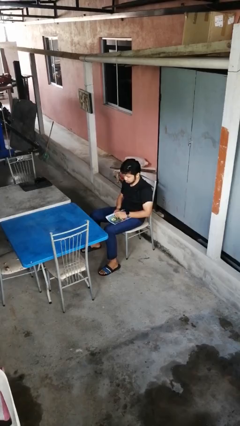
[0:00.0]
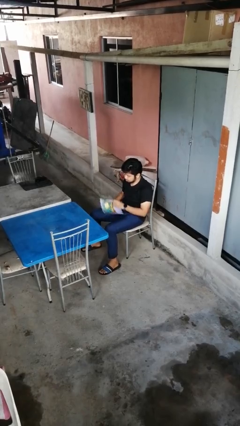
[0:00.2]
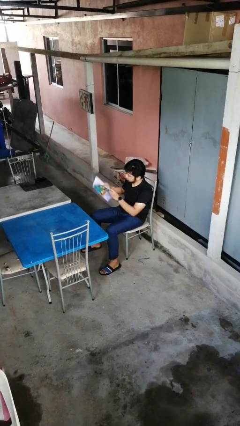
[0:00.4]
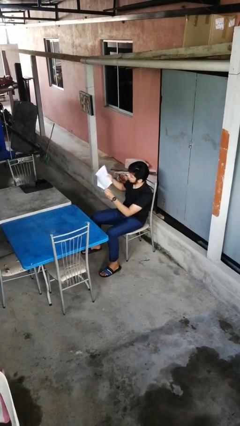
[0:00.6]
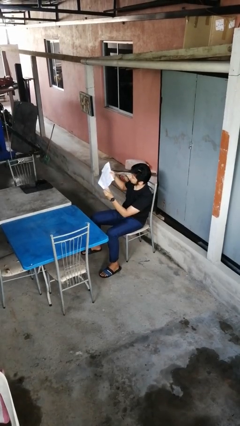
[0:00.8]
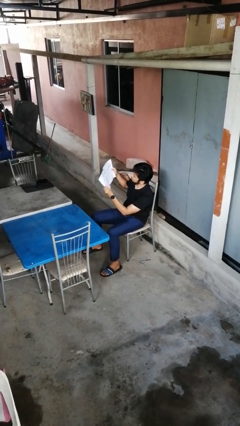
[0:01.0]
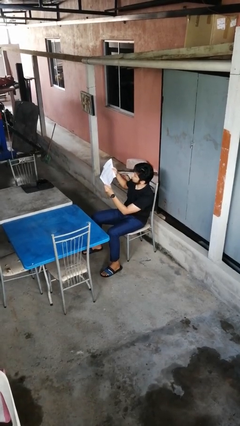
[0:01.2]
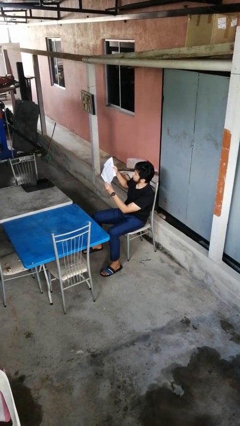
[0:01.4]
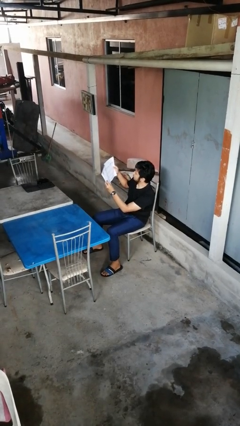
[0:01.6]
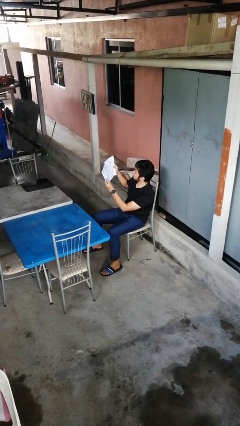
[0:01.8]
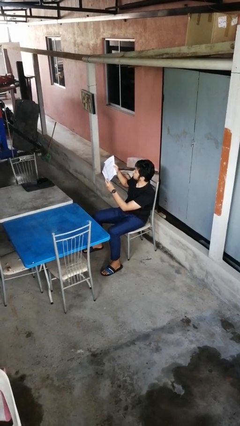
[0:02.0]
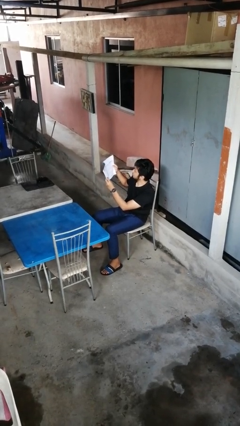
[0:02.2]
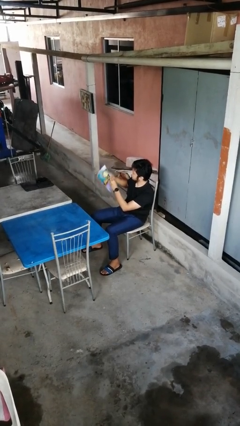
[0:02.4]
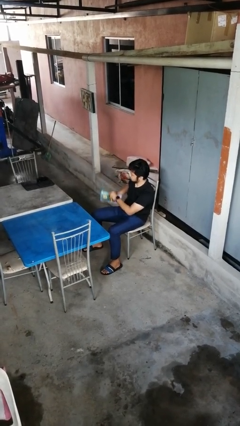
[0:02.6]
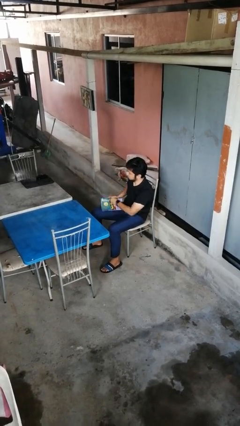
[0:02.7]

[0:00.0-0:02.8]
person reads magazine

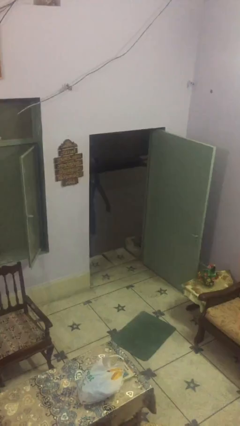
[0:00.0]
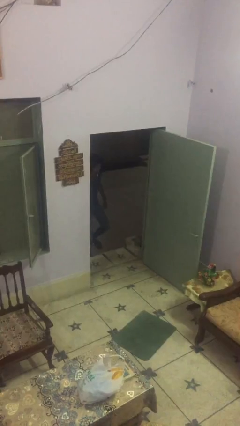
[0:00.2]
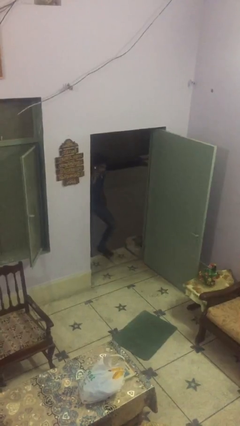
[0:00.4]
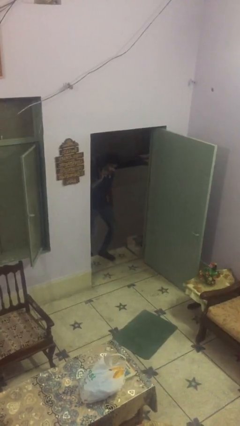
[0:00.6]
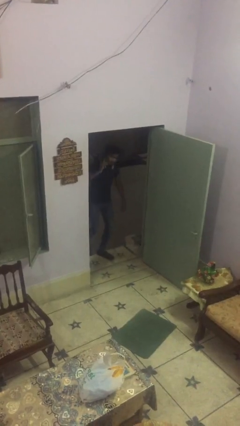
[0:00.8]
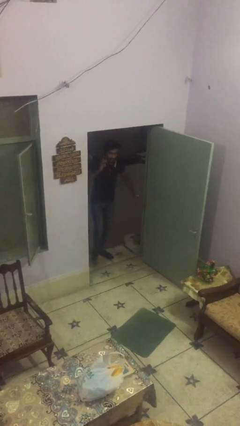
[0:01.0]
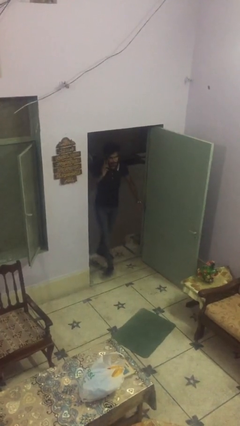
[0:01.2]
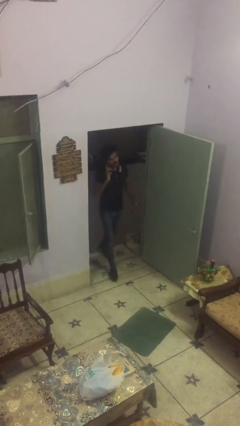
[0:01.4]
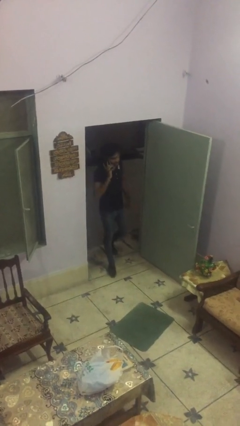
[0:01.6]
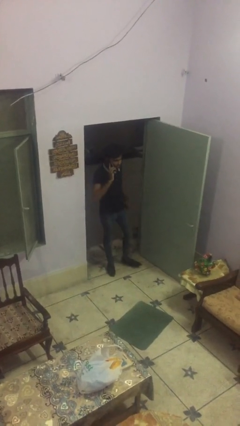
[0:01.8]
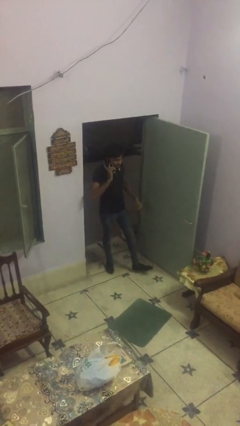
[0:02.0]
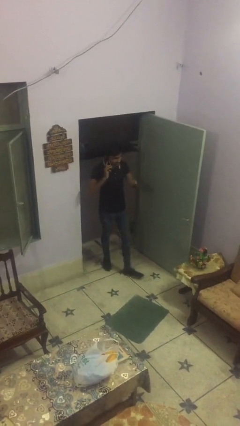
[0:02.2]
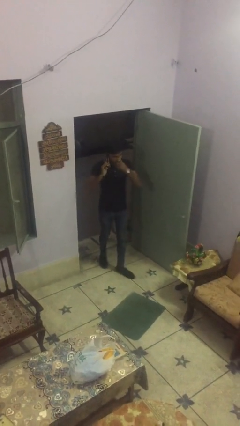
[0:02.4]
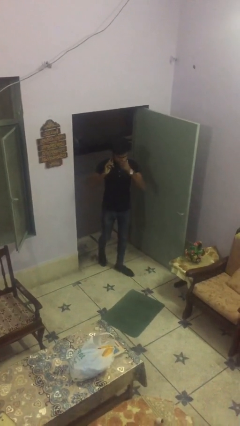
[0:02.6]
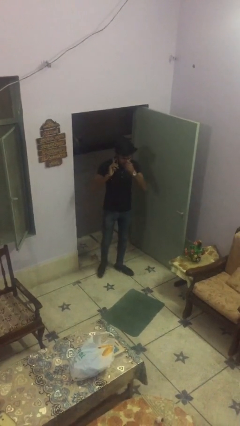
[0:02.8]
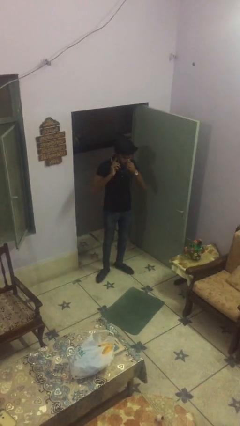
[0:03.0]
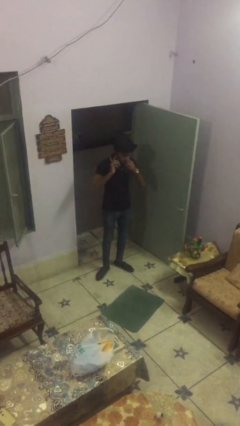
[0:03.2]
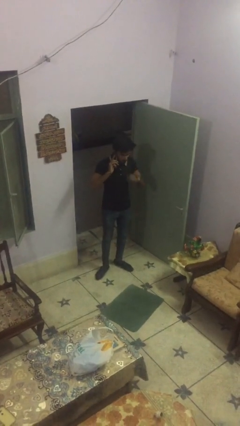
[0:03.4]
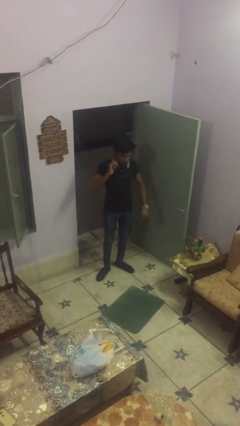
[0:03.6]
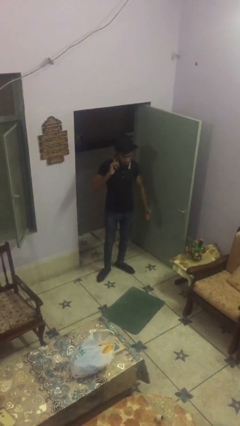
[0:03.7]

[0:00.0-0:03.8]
person enters scene through structure

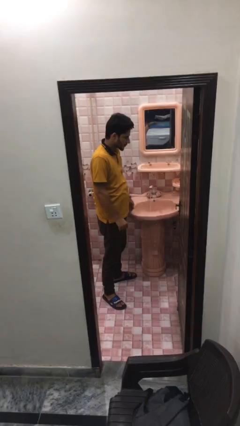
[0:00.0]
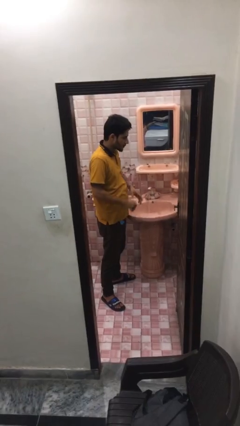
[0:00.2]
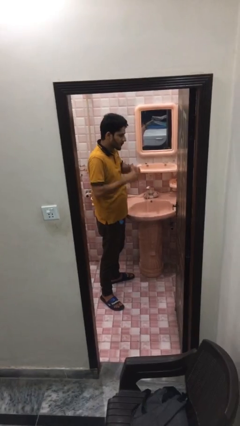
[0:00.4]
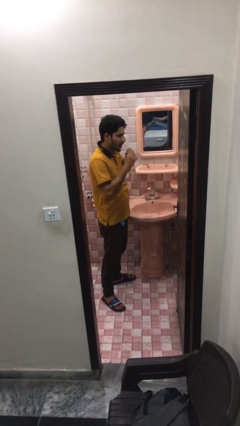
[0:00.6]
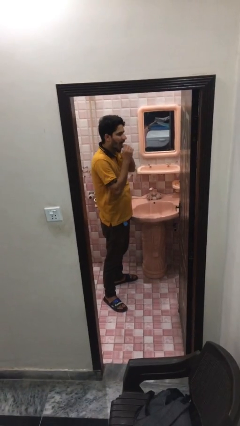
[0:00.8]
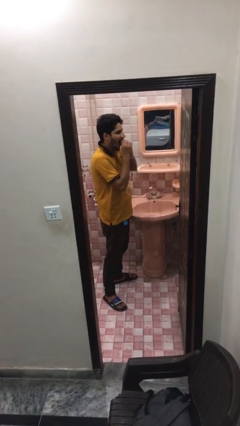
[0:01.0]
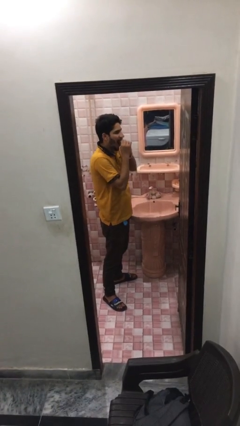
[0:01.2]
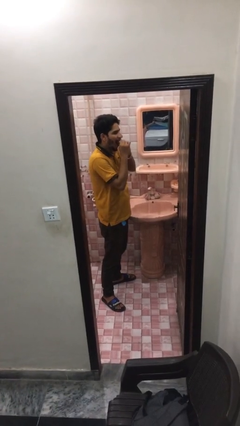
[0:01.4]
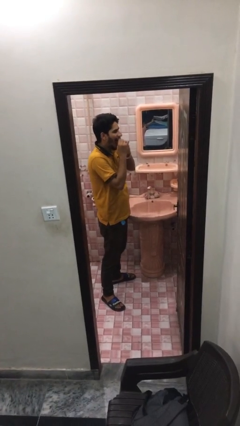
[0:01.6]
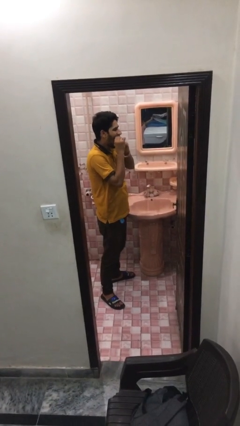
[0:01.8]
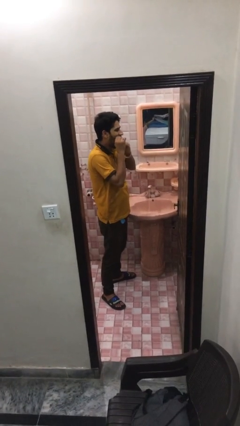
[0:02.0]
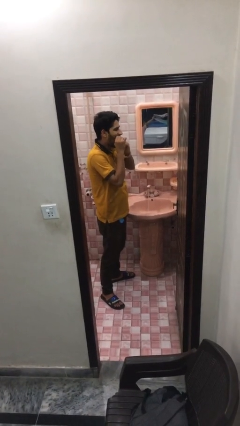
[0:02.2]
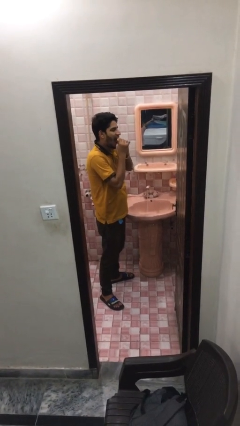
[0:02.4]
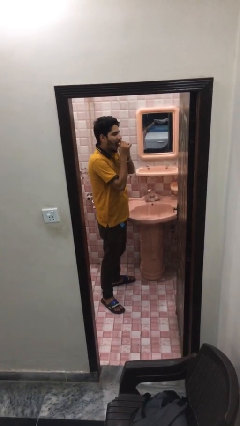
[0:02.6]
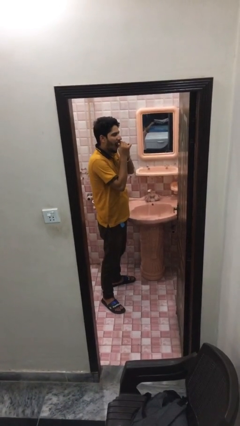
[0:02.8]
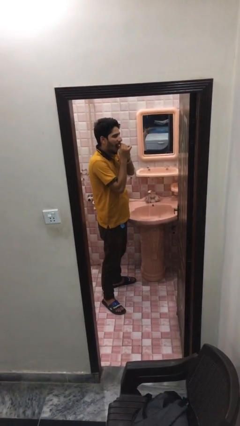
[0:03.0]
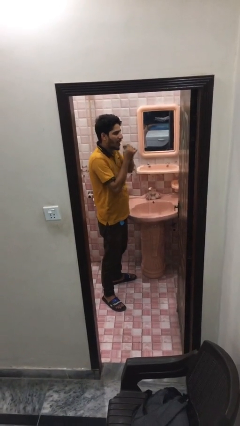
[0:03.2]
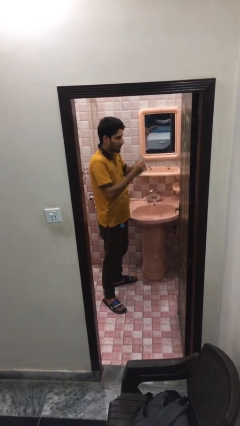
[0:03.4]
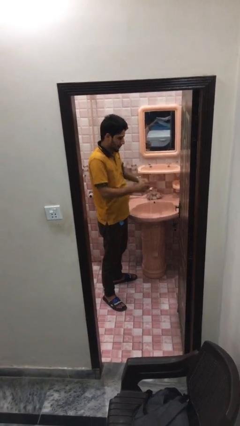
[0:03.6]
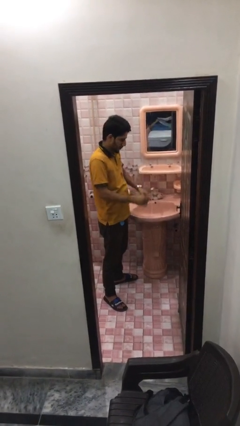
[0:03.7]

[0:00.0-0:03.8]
person flosses

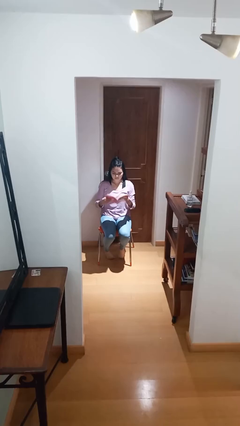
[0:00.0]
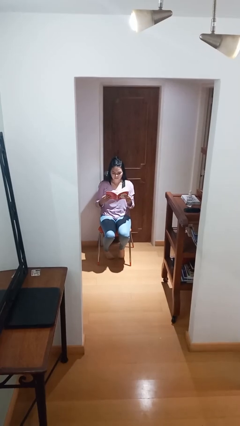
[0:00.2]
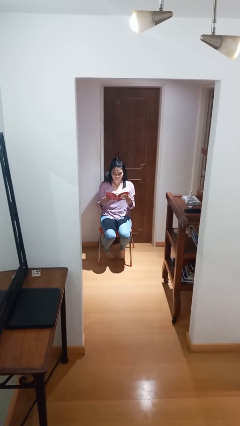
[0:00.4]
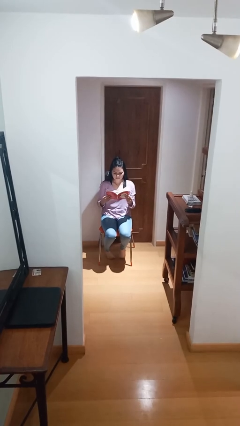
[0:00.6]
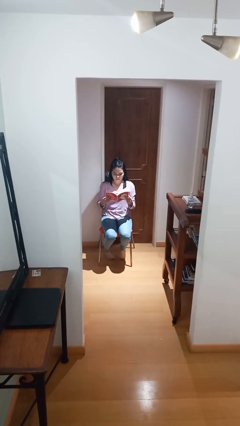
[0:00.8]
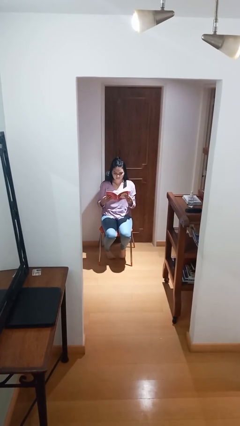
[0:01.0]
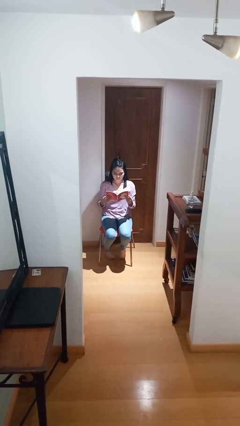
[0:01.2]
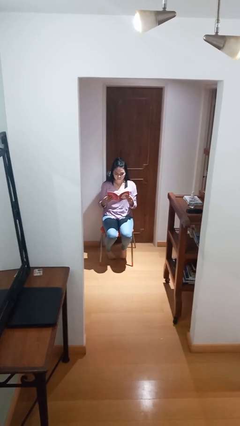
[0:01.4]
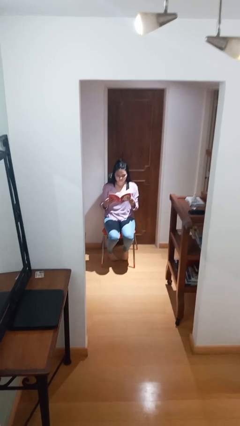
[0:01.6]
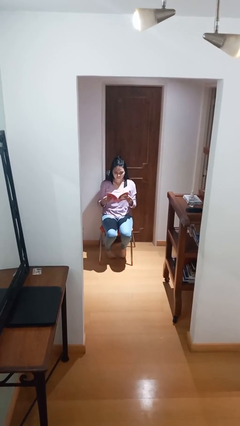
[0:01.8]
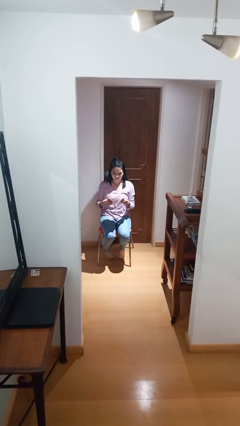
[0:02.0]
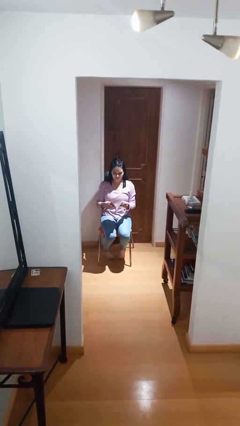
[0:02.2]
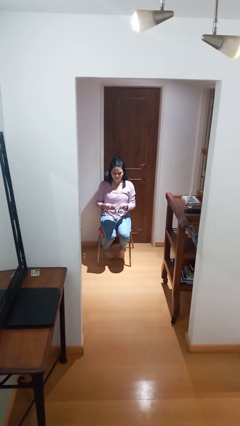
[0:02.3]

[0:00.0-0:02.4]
person reads document

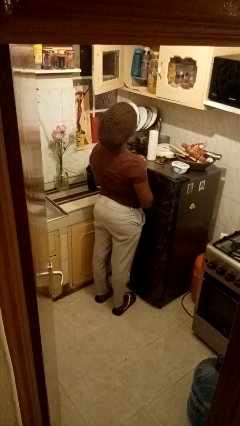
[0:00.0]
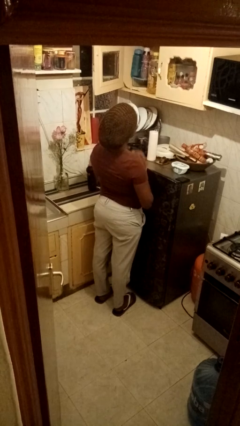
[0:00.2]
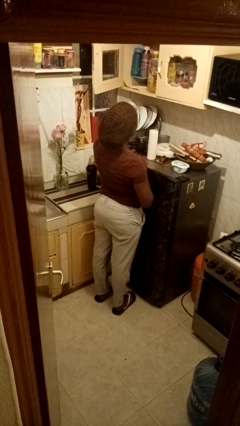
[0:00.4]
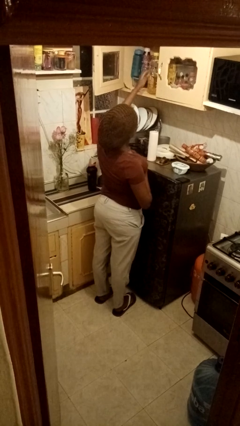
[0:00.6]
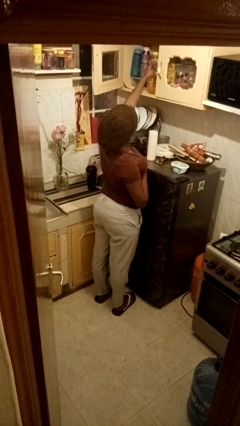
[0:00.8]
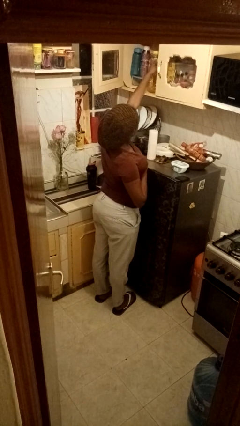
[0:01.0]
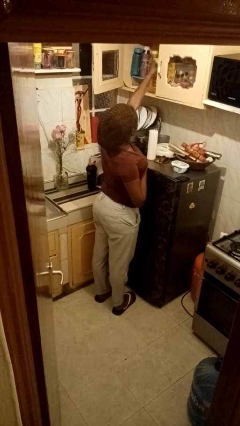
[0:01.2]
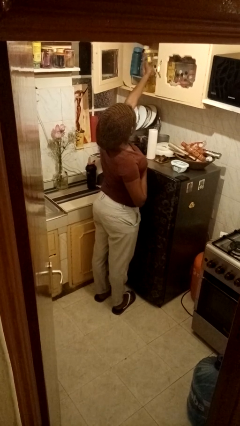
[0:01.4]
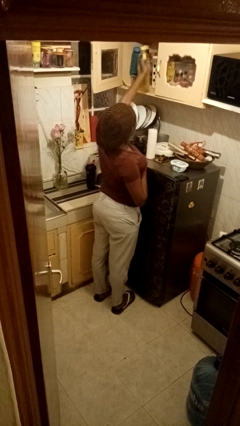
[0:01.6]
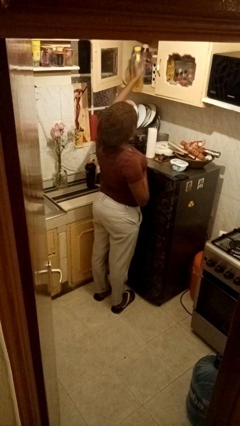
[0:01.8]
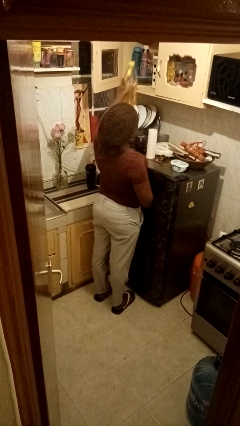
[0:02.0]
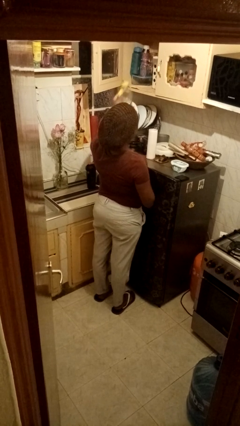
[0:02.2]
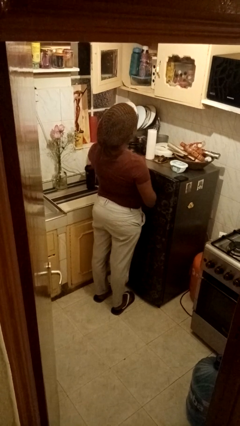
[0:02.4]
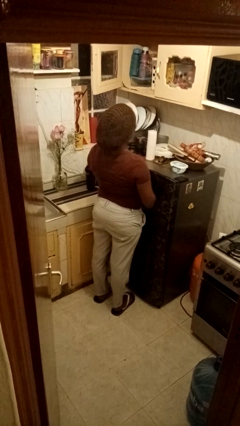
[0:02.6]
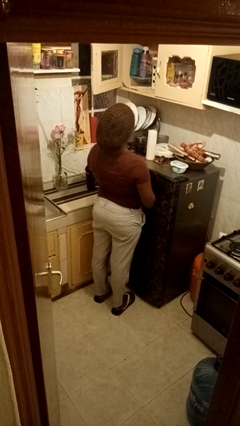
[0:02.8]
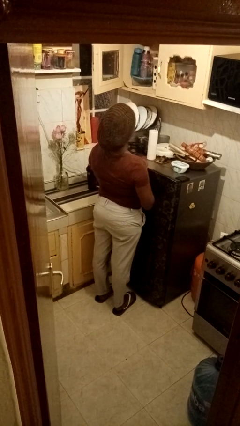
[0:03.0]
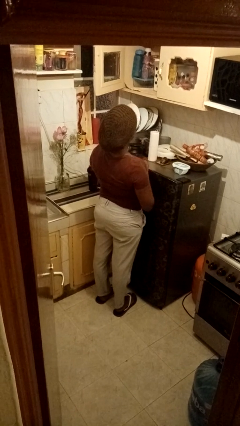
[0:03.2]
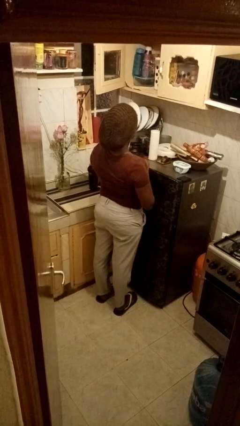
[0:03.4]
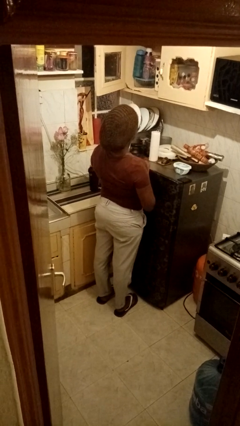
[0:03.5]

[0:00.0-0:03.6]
person picks up object from shelf

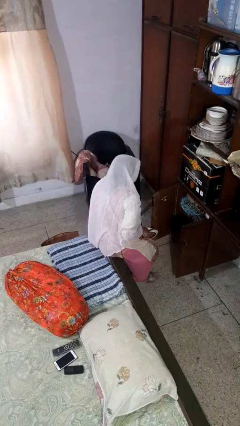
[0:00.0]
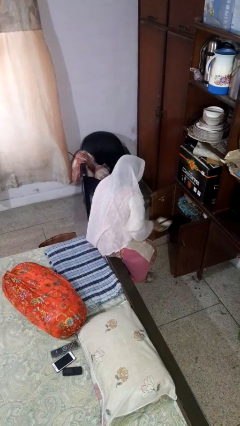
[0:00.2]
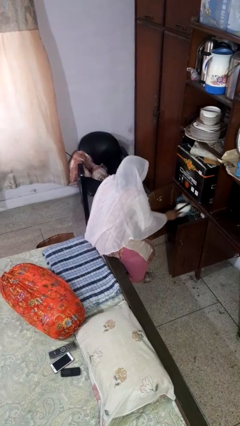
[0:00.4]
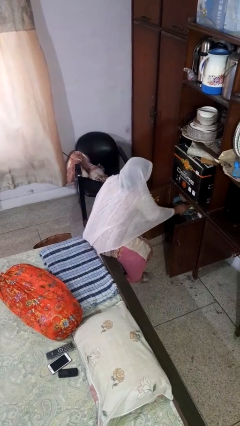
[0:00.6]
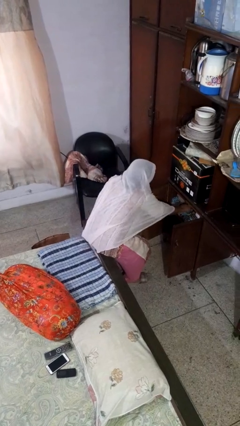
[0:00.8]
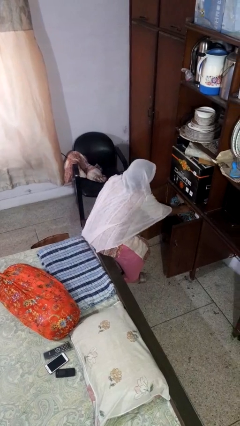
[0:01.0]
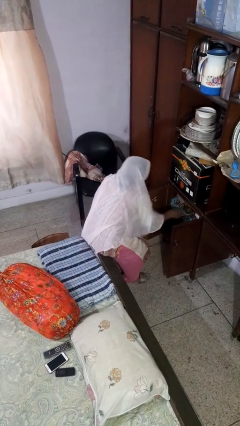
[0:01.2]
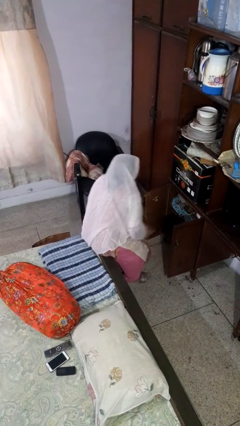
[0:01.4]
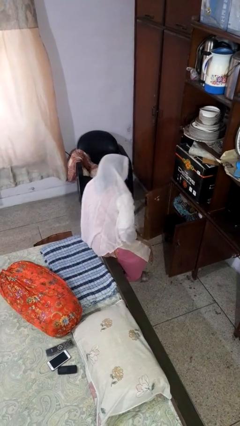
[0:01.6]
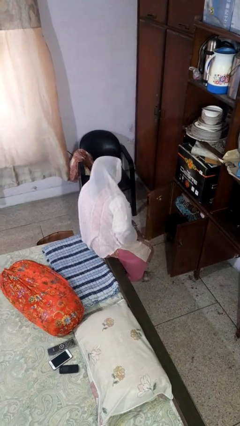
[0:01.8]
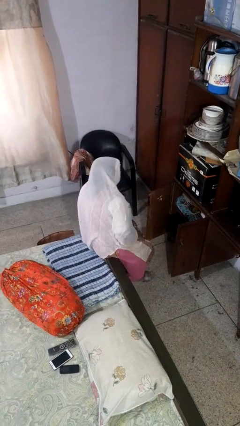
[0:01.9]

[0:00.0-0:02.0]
person puts object in cabinet
